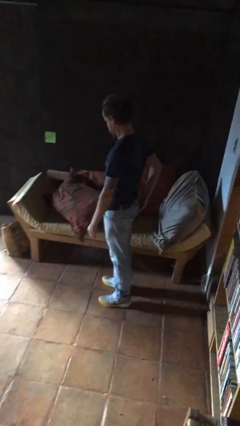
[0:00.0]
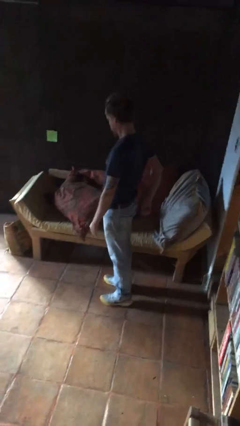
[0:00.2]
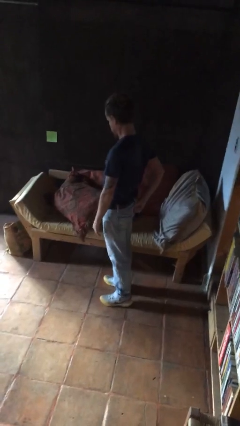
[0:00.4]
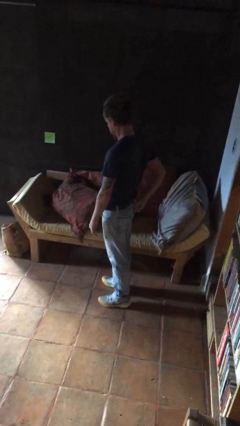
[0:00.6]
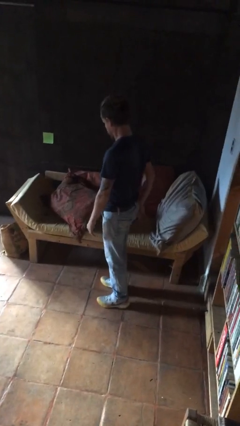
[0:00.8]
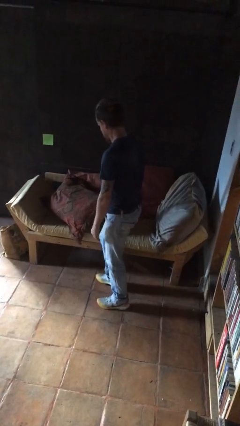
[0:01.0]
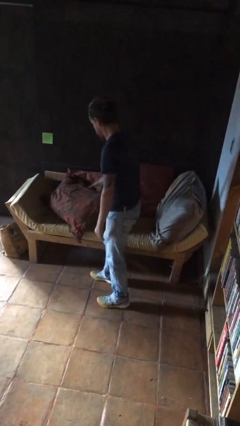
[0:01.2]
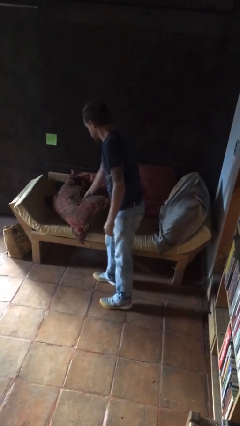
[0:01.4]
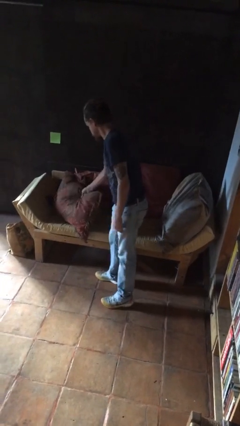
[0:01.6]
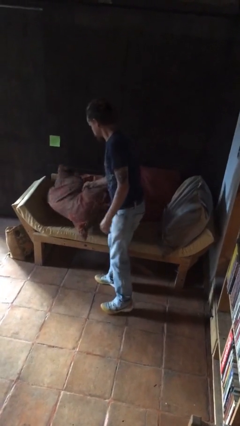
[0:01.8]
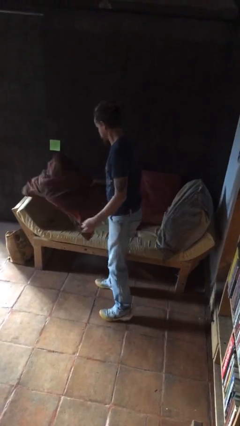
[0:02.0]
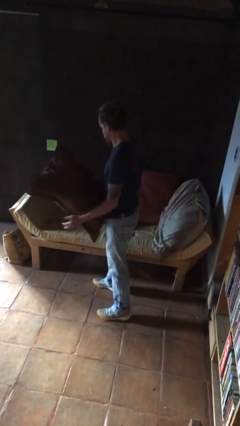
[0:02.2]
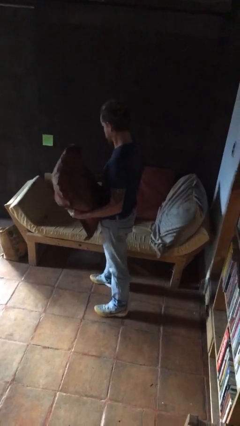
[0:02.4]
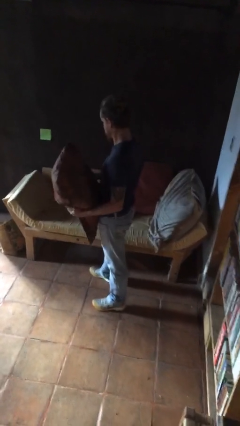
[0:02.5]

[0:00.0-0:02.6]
person picks up object from couch

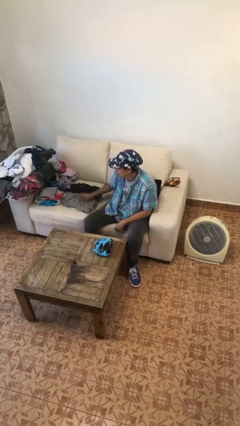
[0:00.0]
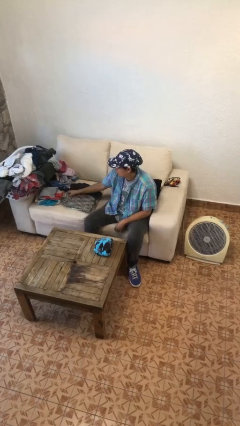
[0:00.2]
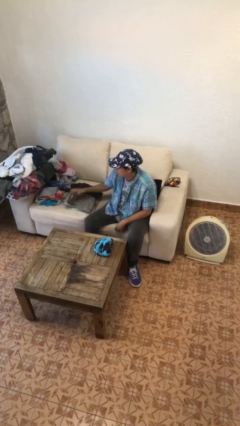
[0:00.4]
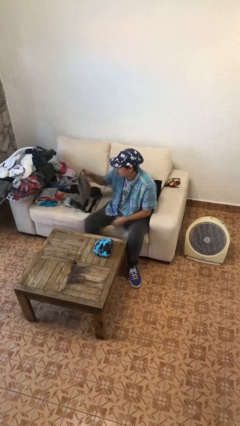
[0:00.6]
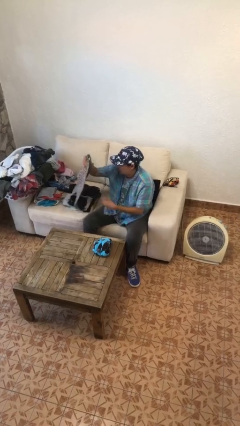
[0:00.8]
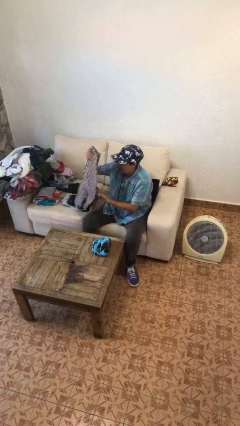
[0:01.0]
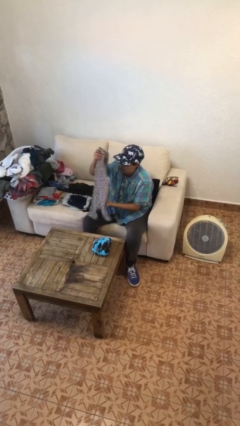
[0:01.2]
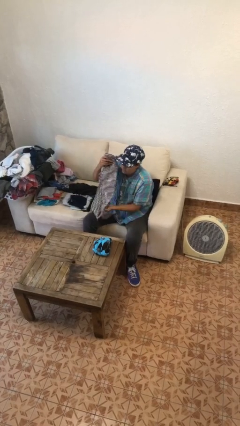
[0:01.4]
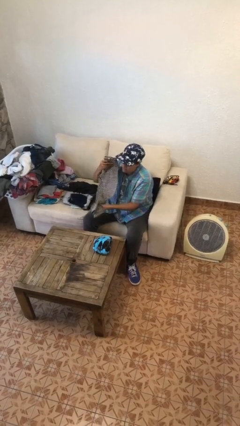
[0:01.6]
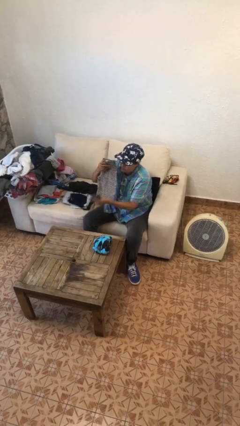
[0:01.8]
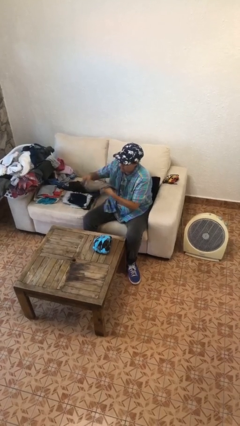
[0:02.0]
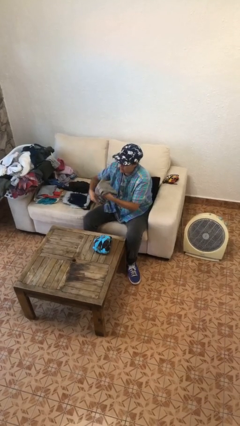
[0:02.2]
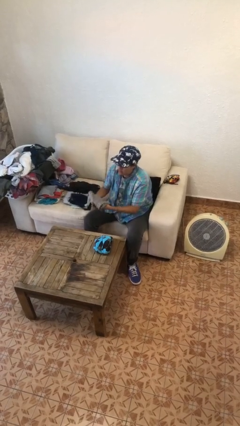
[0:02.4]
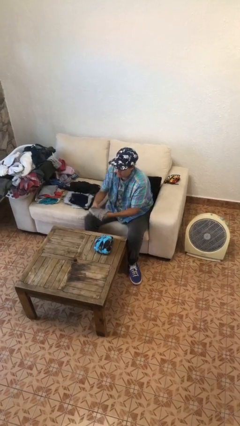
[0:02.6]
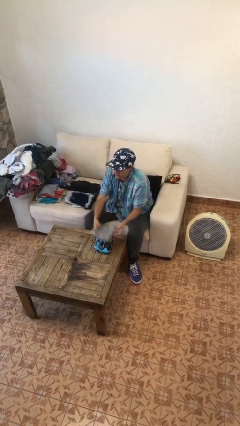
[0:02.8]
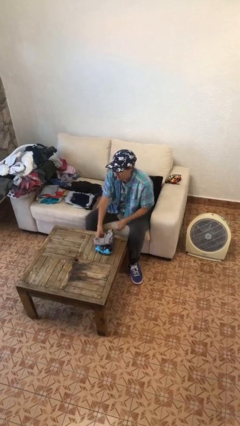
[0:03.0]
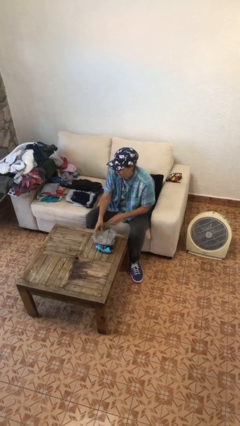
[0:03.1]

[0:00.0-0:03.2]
person folds pants

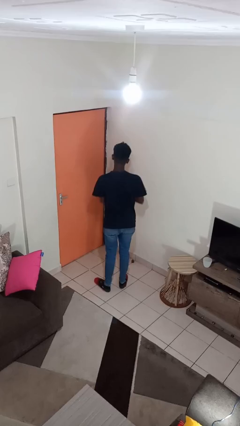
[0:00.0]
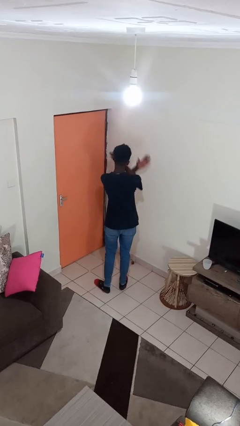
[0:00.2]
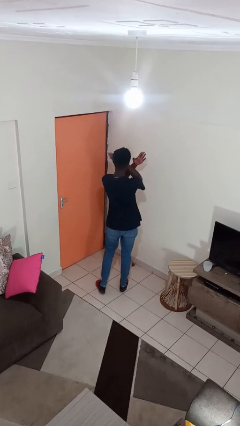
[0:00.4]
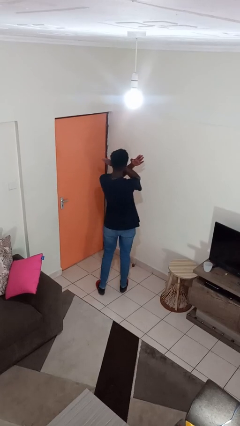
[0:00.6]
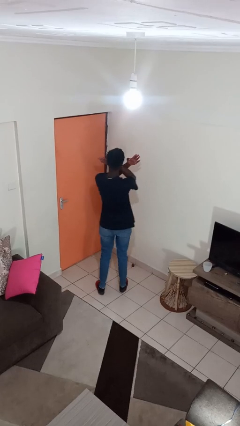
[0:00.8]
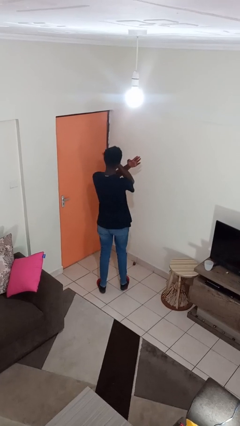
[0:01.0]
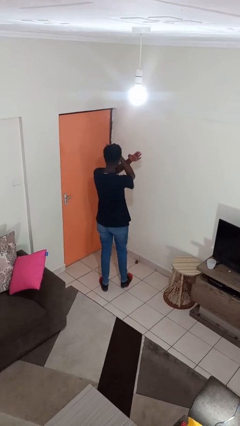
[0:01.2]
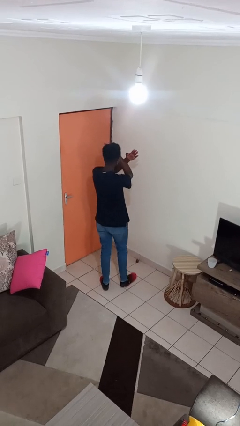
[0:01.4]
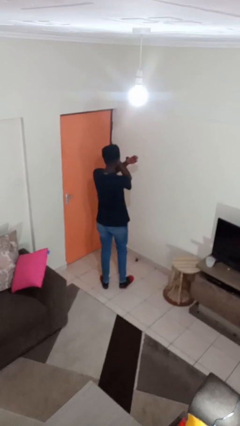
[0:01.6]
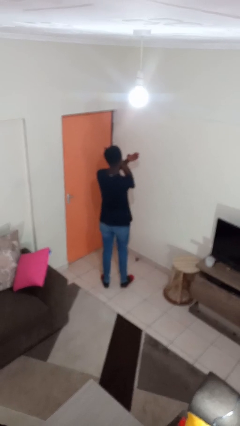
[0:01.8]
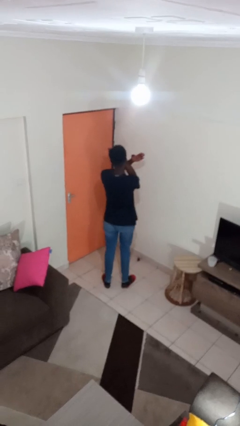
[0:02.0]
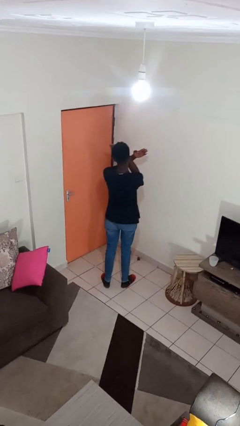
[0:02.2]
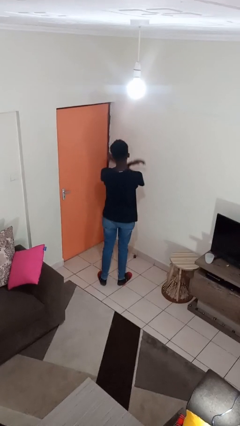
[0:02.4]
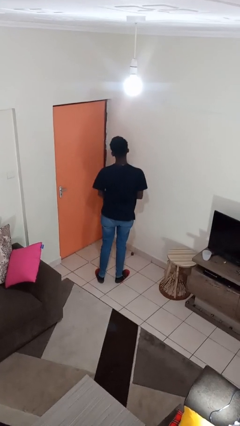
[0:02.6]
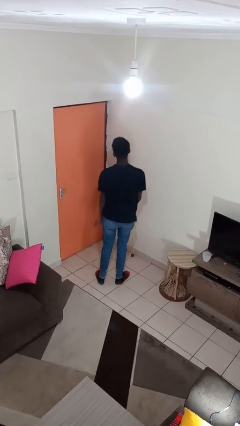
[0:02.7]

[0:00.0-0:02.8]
person gestures arms x

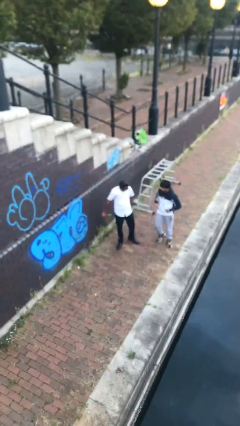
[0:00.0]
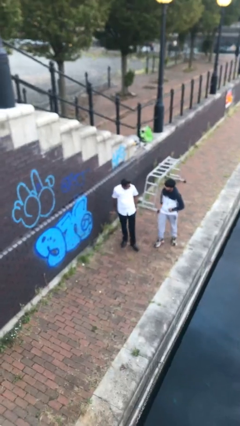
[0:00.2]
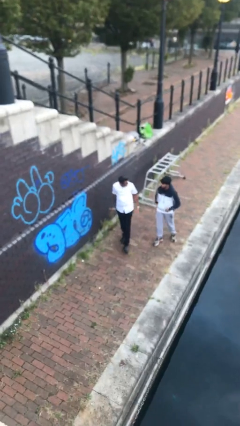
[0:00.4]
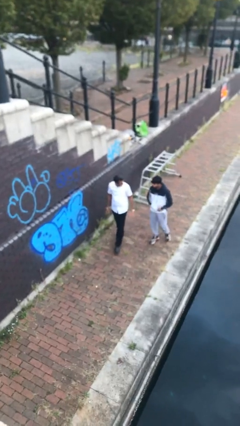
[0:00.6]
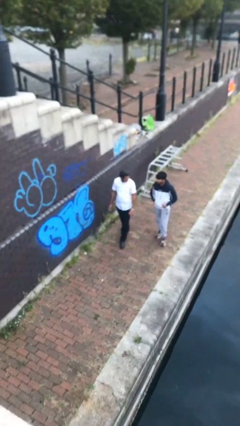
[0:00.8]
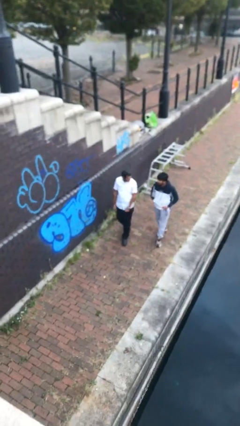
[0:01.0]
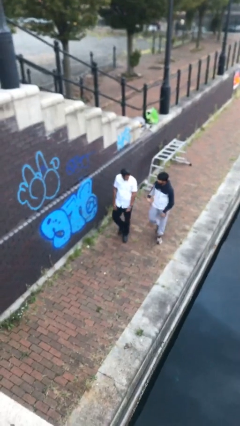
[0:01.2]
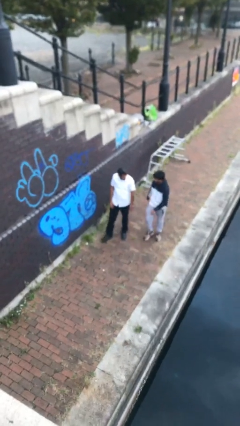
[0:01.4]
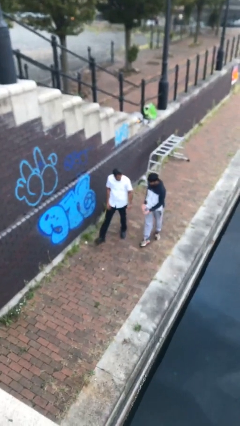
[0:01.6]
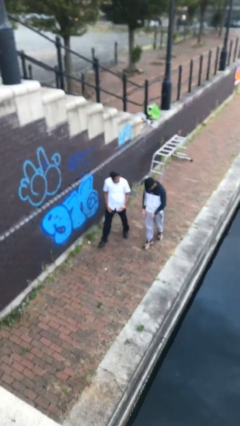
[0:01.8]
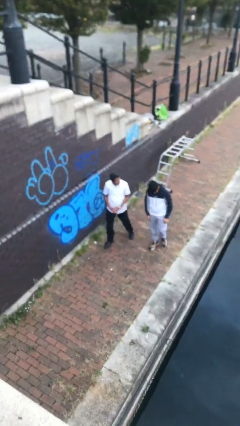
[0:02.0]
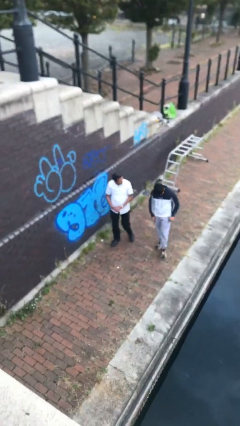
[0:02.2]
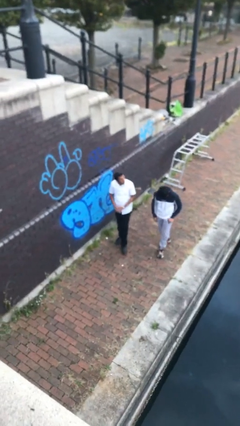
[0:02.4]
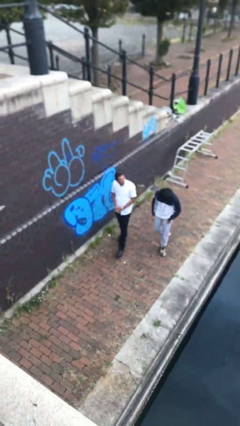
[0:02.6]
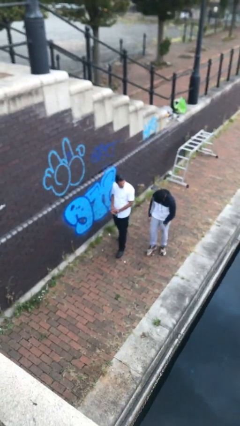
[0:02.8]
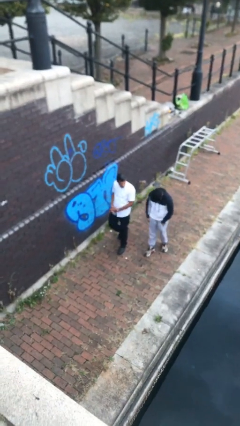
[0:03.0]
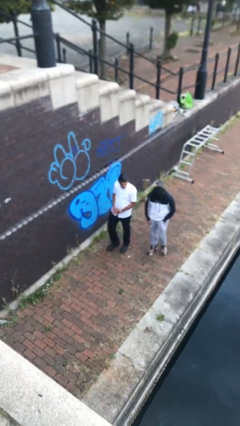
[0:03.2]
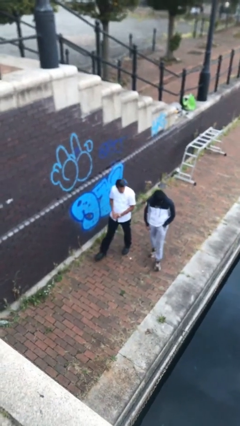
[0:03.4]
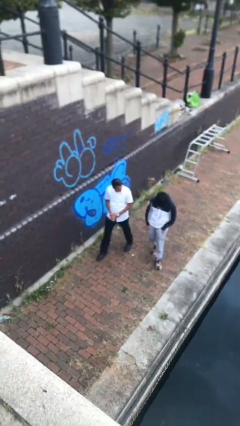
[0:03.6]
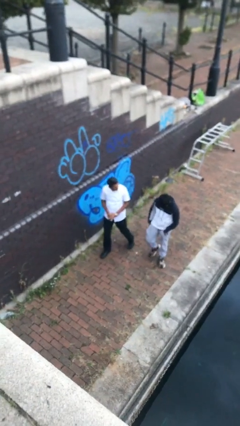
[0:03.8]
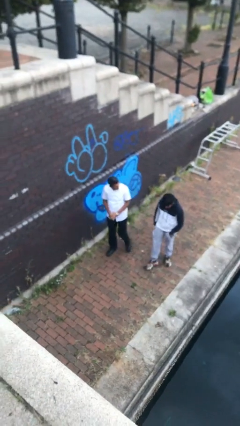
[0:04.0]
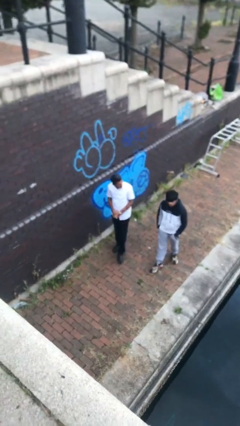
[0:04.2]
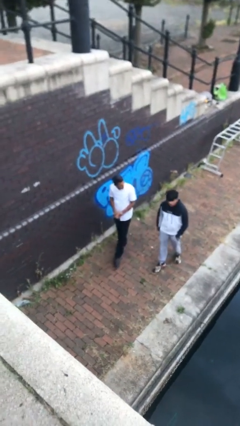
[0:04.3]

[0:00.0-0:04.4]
person talks to person

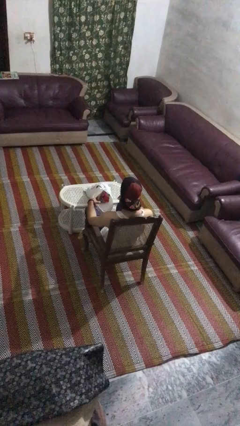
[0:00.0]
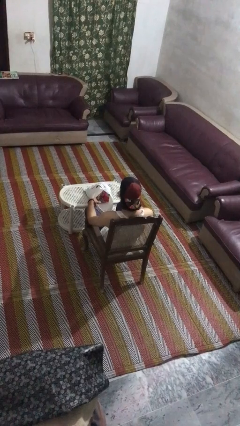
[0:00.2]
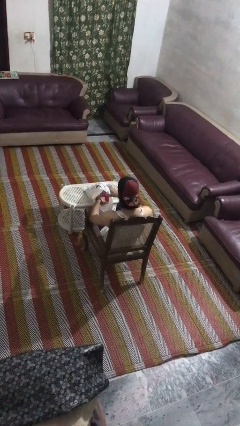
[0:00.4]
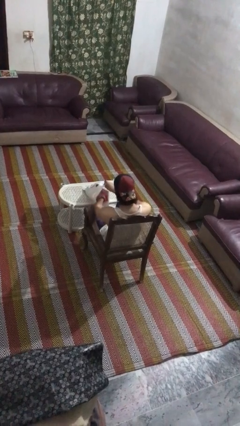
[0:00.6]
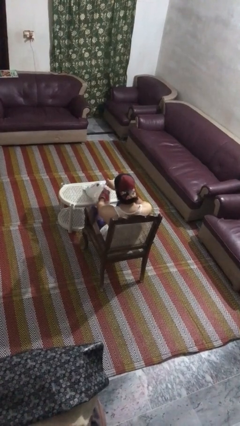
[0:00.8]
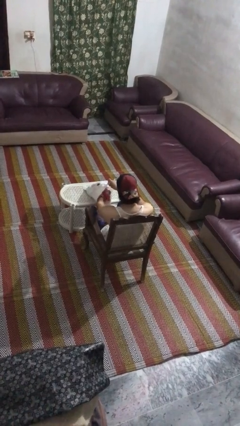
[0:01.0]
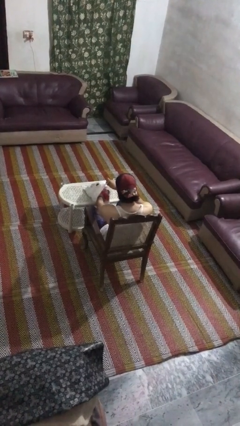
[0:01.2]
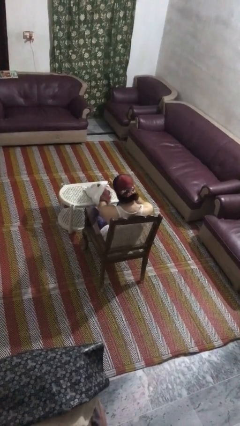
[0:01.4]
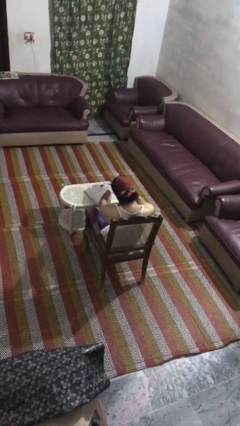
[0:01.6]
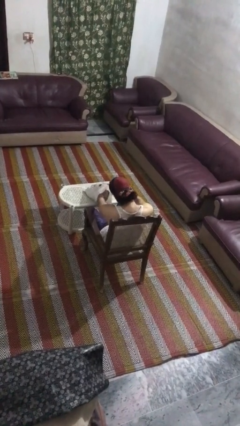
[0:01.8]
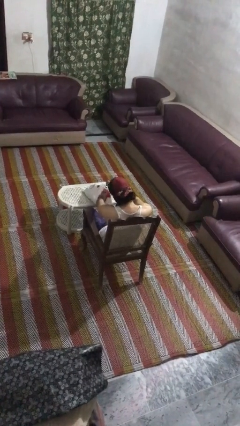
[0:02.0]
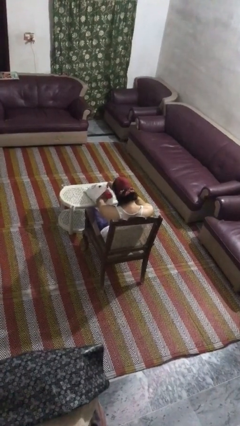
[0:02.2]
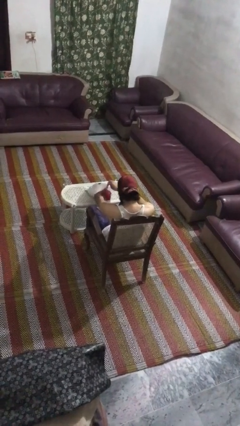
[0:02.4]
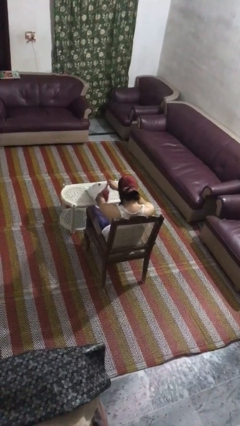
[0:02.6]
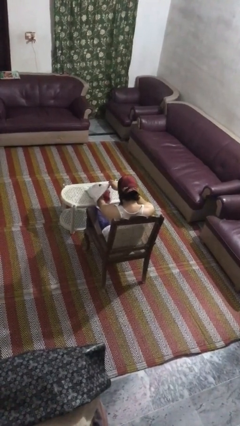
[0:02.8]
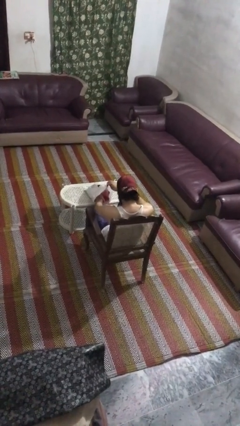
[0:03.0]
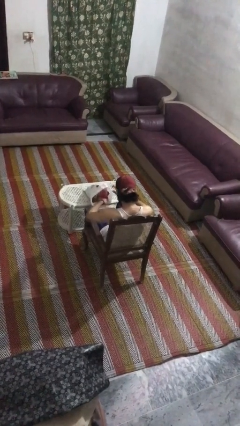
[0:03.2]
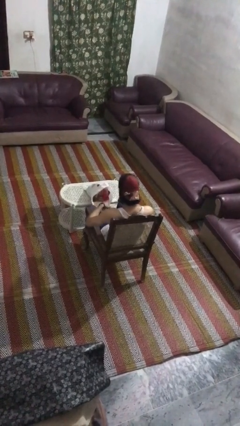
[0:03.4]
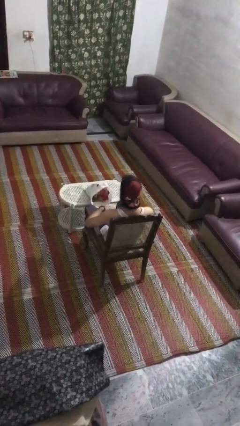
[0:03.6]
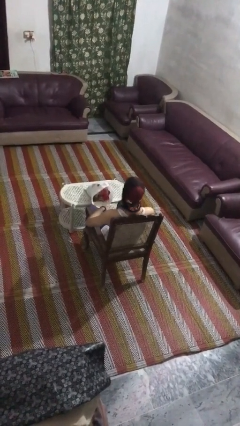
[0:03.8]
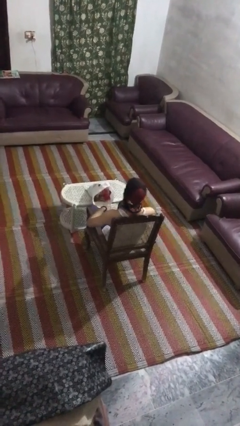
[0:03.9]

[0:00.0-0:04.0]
person searches in bag

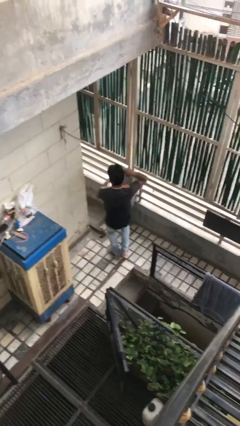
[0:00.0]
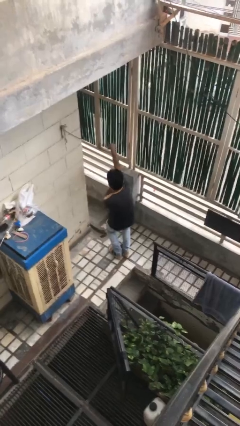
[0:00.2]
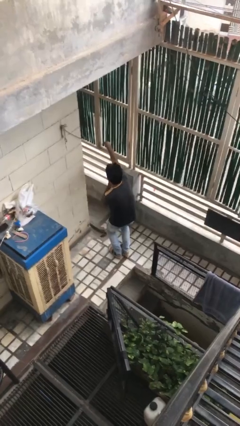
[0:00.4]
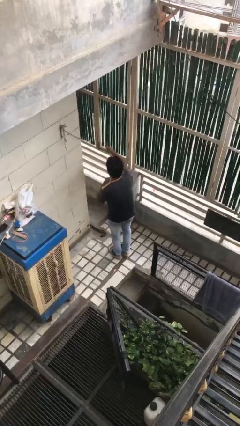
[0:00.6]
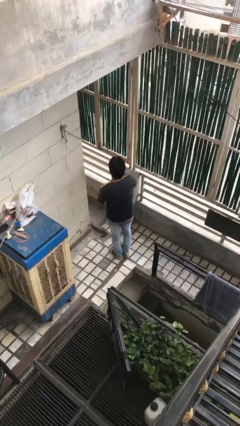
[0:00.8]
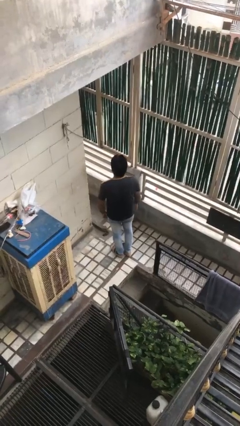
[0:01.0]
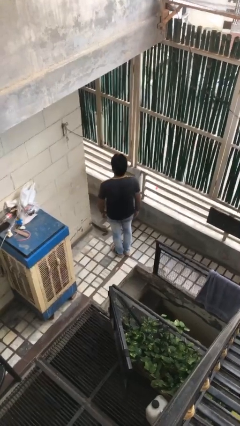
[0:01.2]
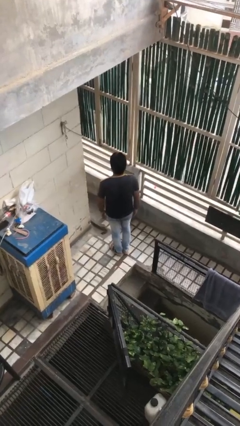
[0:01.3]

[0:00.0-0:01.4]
person karate chop
